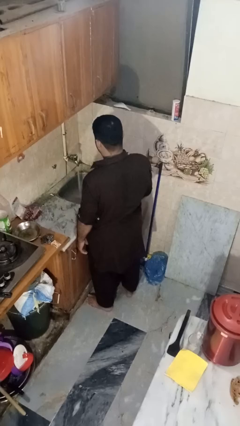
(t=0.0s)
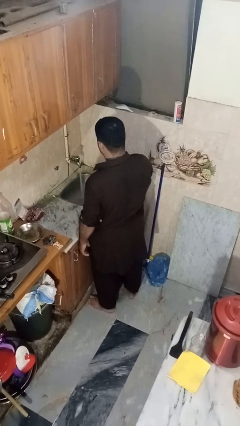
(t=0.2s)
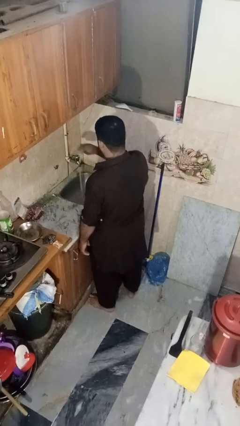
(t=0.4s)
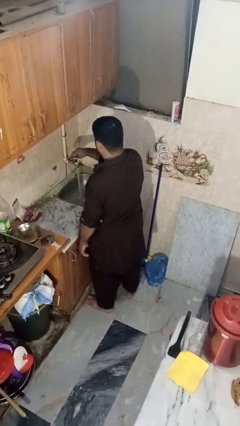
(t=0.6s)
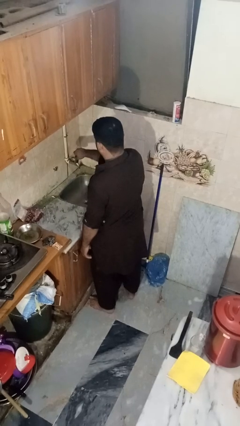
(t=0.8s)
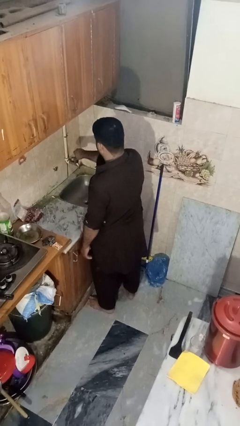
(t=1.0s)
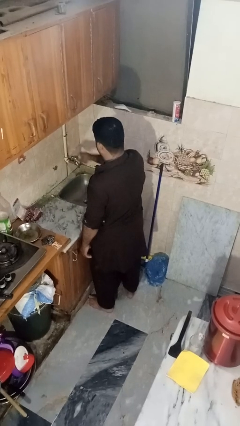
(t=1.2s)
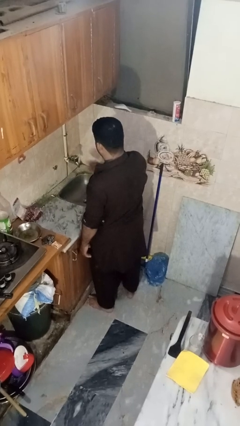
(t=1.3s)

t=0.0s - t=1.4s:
person turns off faucet

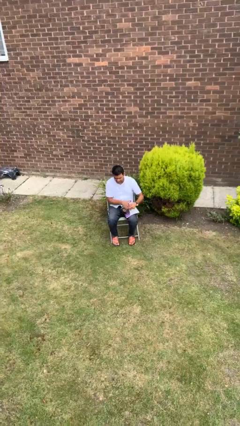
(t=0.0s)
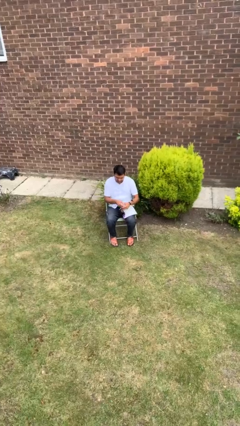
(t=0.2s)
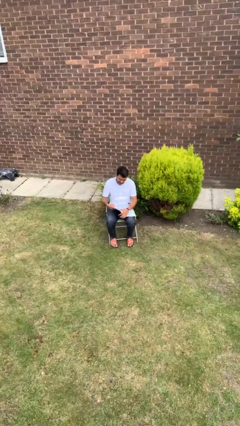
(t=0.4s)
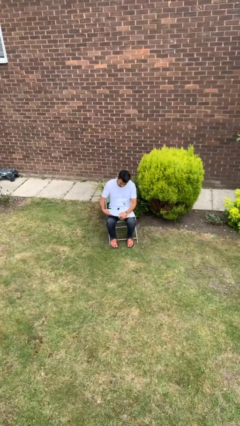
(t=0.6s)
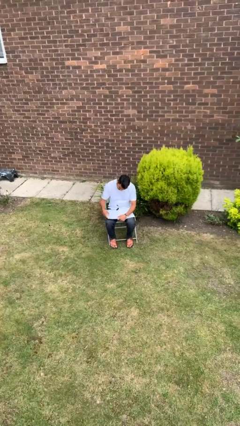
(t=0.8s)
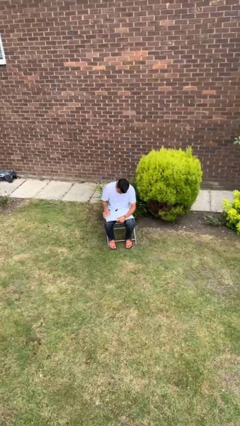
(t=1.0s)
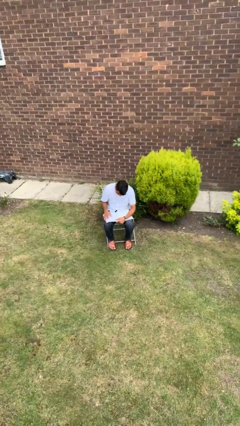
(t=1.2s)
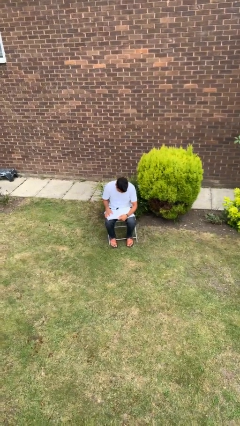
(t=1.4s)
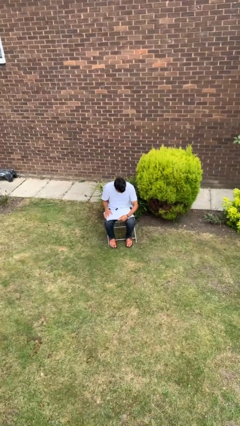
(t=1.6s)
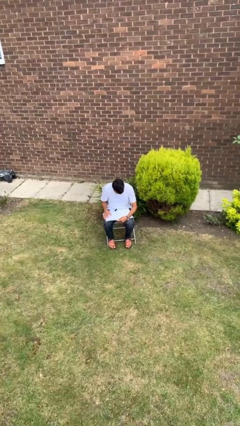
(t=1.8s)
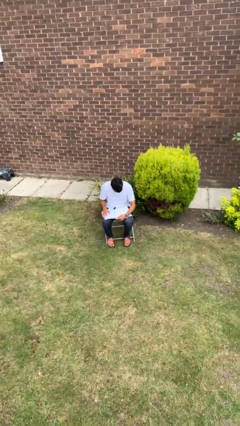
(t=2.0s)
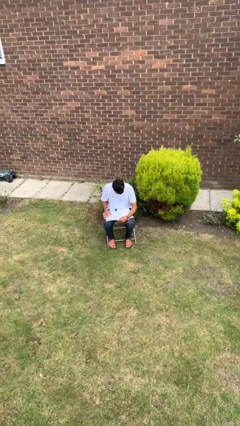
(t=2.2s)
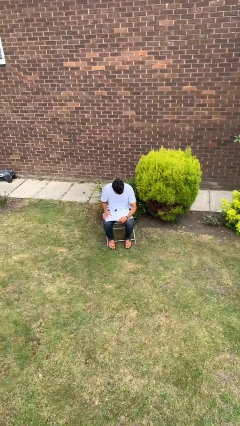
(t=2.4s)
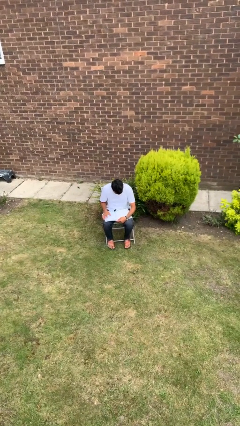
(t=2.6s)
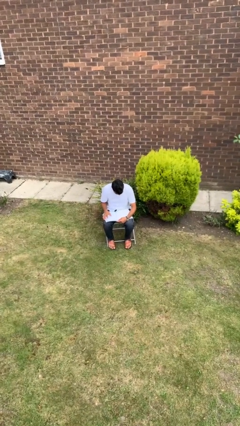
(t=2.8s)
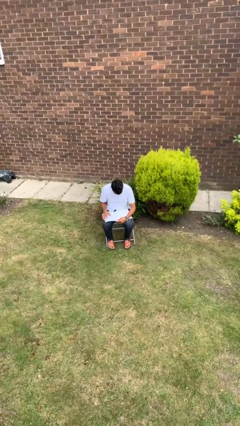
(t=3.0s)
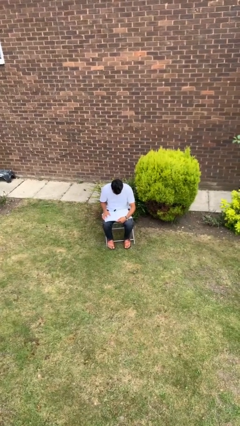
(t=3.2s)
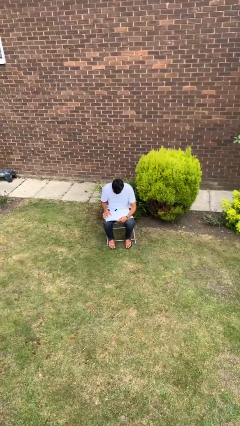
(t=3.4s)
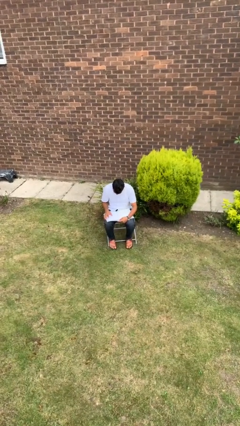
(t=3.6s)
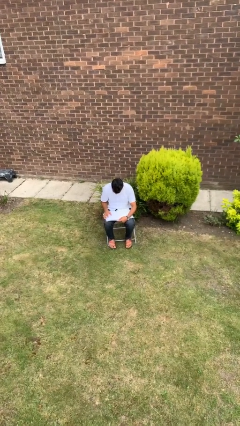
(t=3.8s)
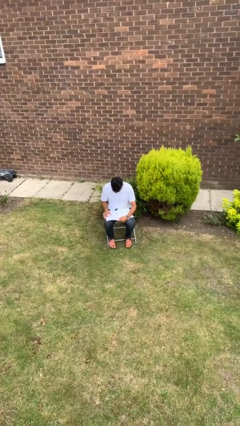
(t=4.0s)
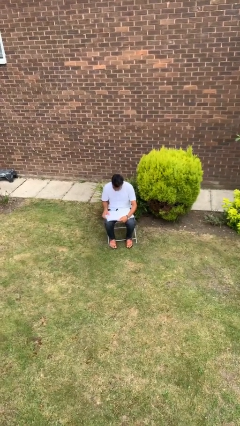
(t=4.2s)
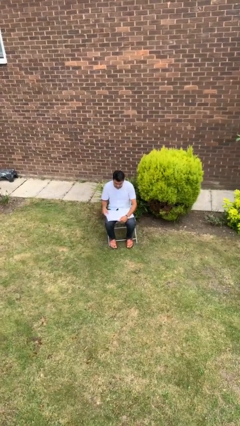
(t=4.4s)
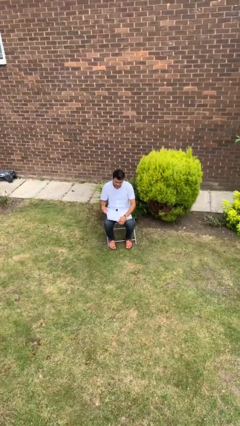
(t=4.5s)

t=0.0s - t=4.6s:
person reads book

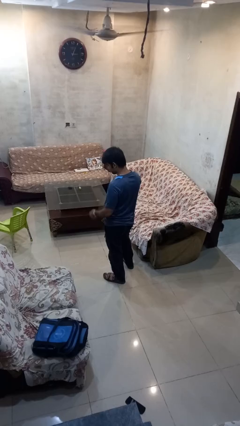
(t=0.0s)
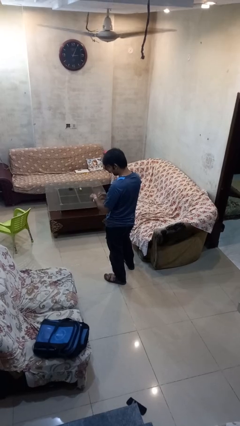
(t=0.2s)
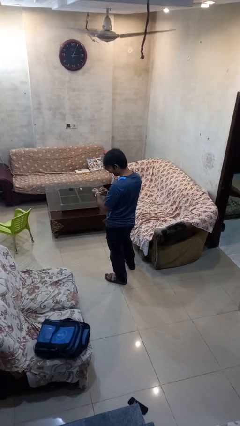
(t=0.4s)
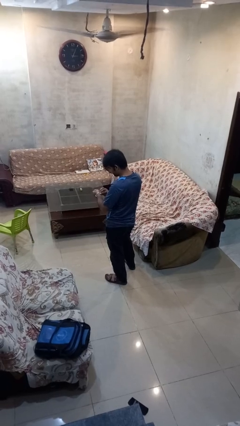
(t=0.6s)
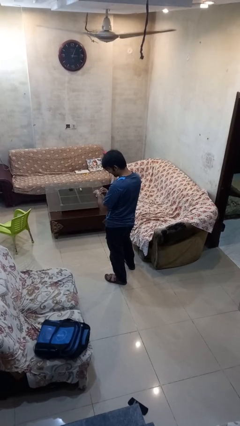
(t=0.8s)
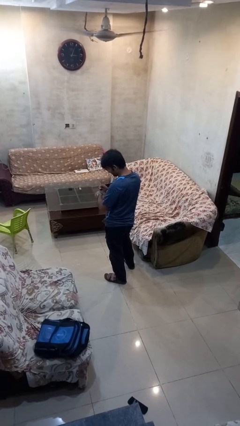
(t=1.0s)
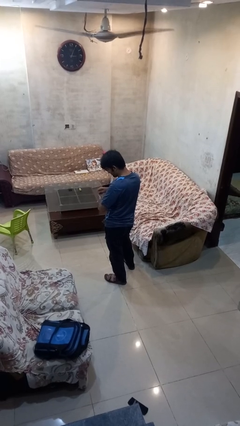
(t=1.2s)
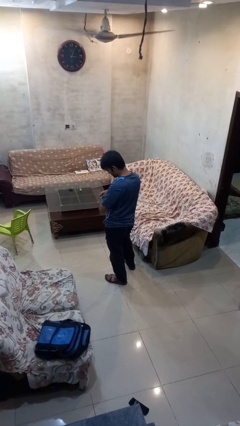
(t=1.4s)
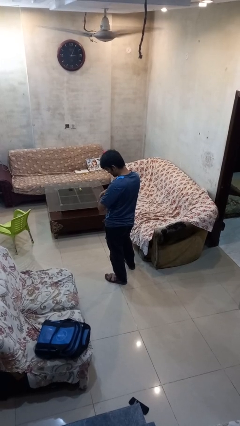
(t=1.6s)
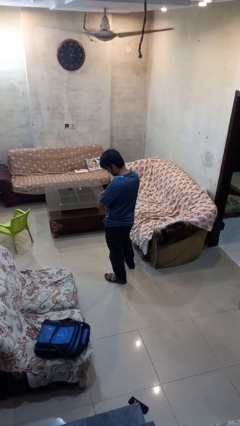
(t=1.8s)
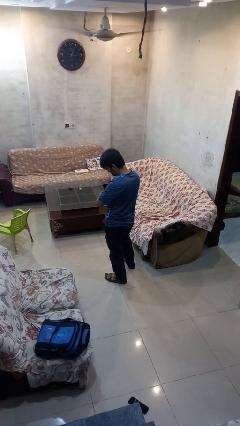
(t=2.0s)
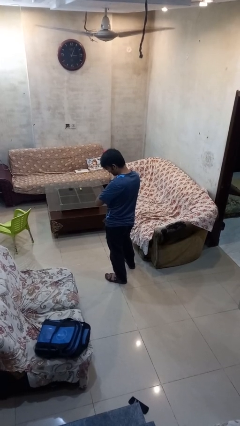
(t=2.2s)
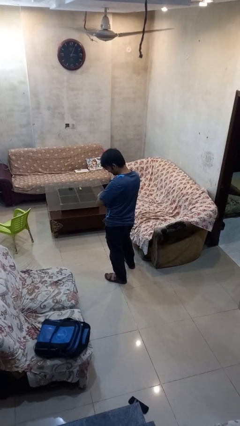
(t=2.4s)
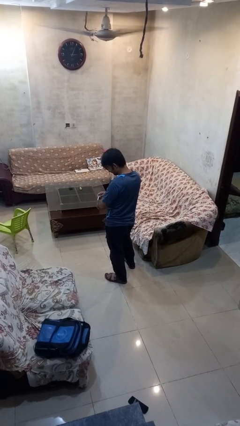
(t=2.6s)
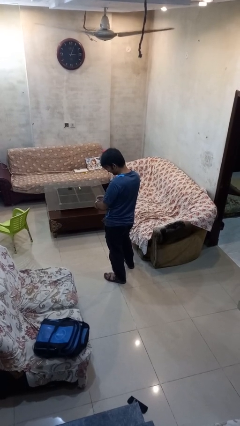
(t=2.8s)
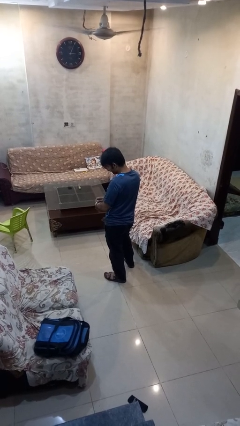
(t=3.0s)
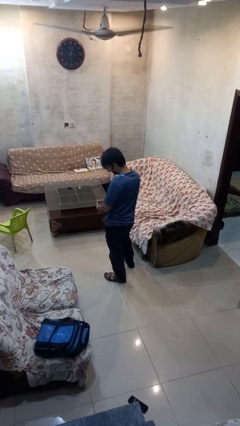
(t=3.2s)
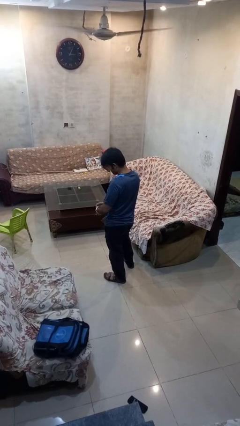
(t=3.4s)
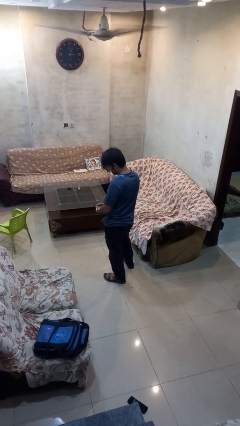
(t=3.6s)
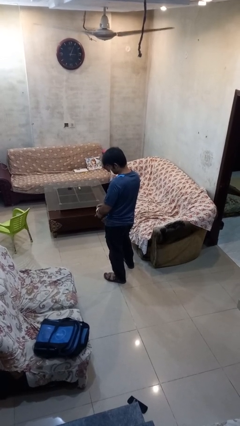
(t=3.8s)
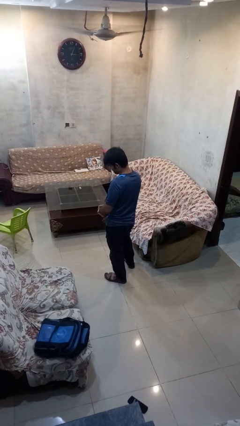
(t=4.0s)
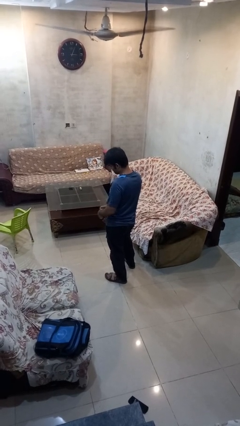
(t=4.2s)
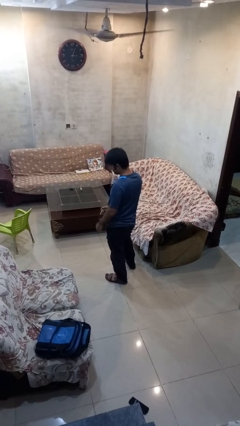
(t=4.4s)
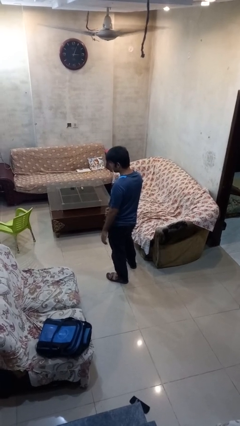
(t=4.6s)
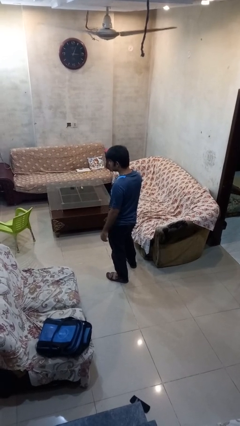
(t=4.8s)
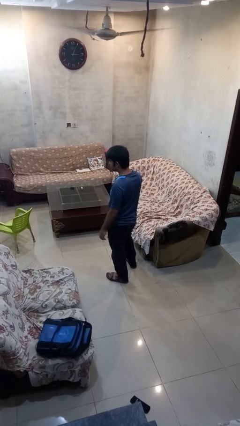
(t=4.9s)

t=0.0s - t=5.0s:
person takes off wristwatch

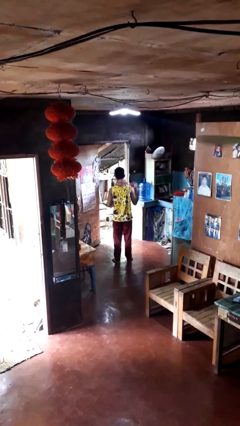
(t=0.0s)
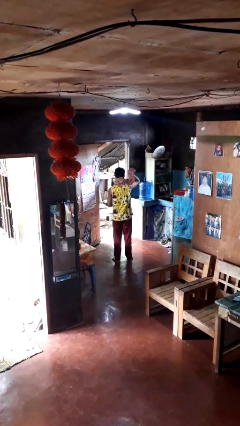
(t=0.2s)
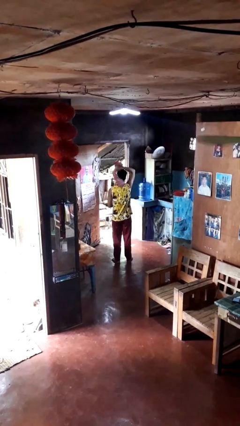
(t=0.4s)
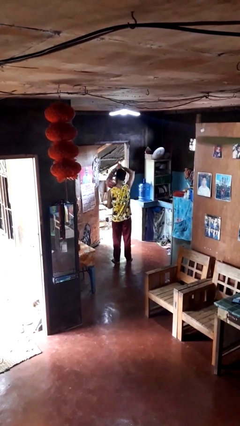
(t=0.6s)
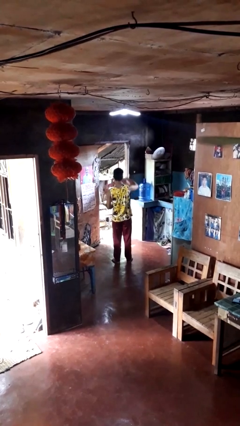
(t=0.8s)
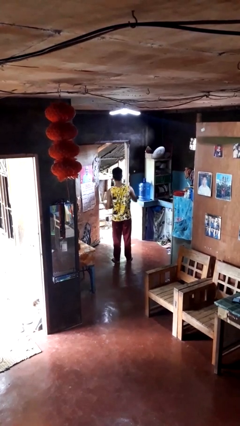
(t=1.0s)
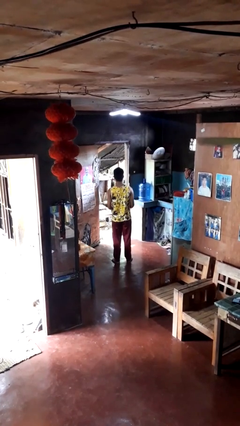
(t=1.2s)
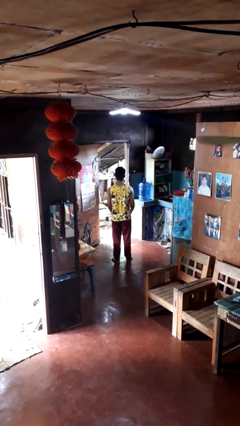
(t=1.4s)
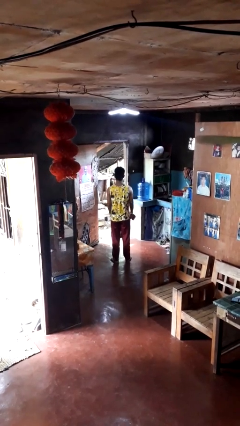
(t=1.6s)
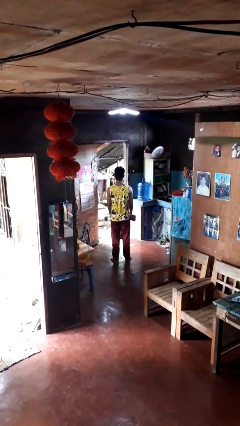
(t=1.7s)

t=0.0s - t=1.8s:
person takes off scarf

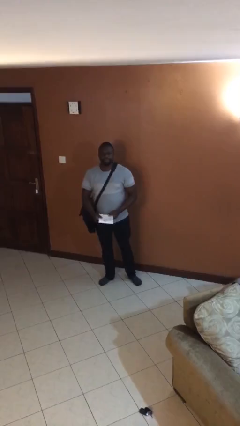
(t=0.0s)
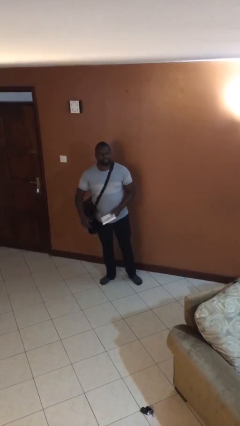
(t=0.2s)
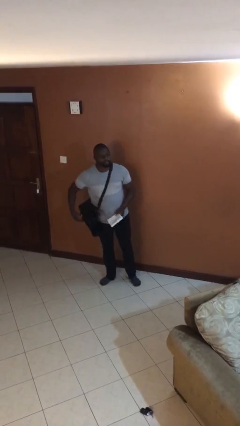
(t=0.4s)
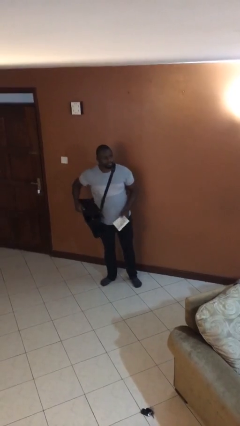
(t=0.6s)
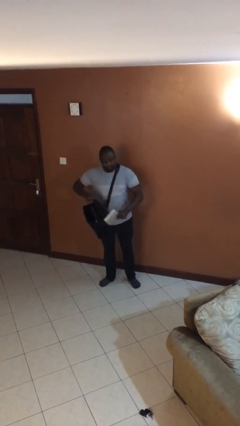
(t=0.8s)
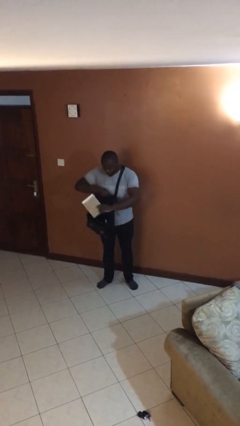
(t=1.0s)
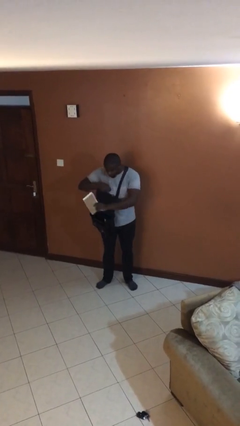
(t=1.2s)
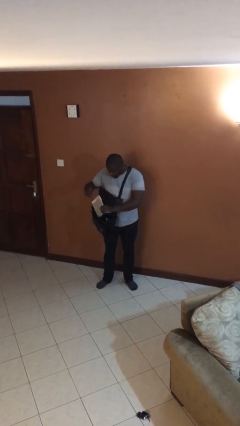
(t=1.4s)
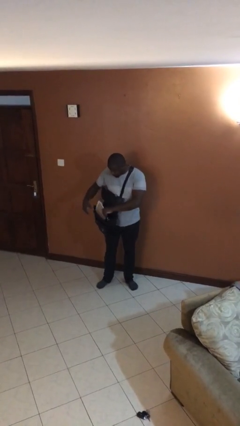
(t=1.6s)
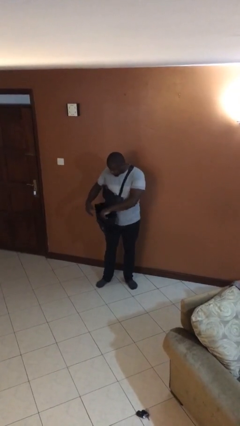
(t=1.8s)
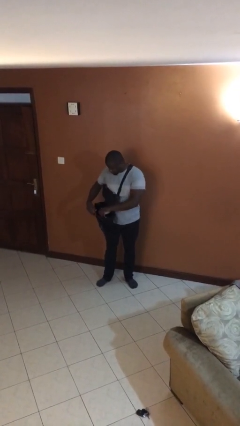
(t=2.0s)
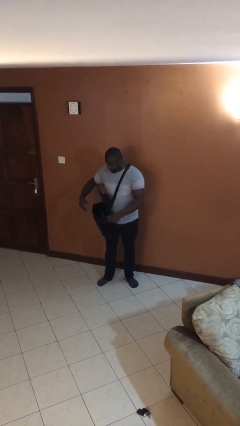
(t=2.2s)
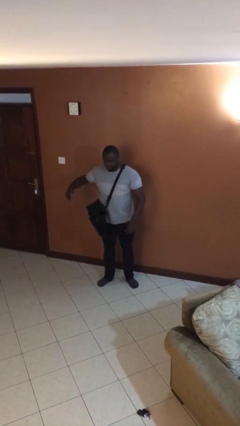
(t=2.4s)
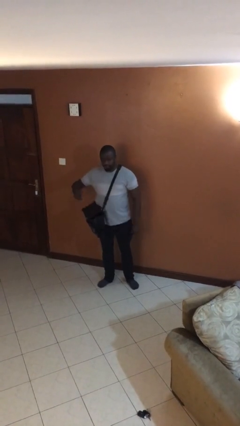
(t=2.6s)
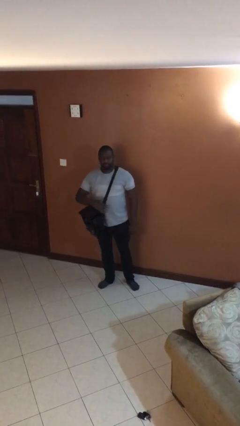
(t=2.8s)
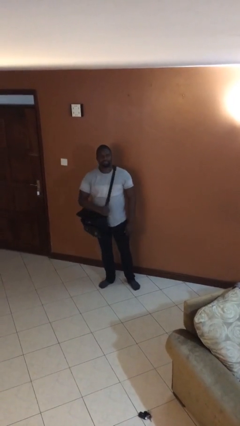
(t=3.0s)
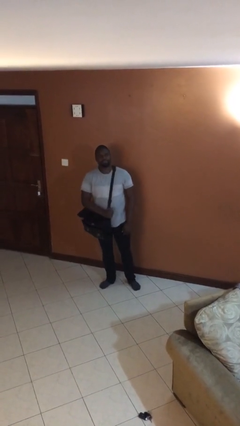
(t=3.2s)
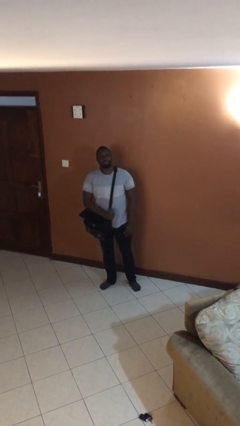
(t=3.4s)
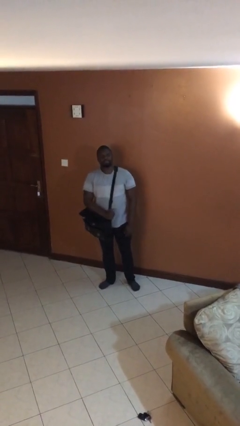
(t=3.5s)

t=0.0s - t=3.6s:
person puts object into purse

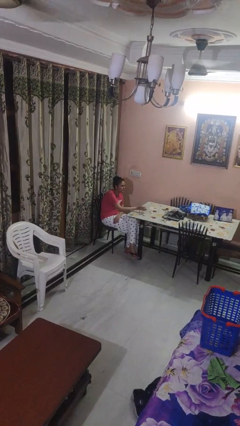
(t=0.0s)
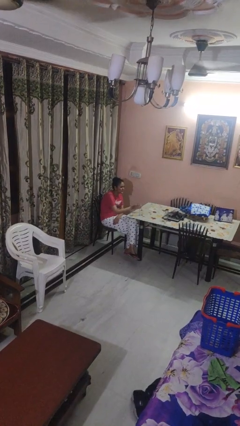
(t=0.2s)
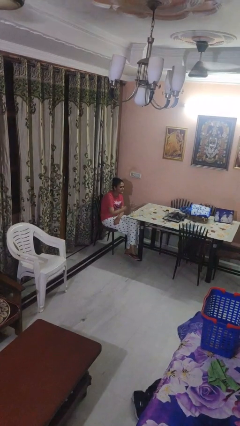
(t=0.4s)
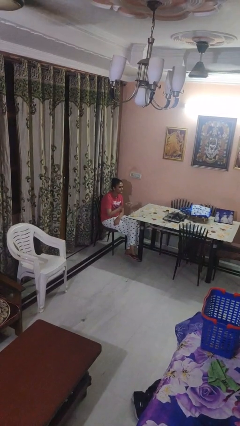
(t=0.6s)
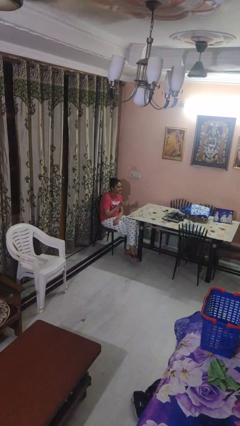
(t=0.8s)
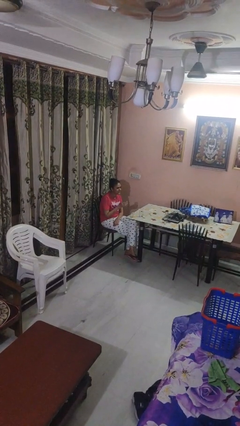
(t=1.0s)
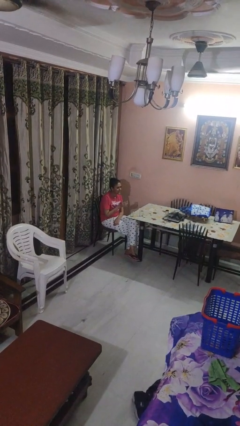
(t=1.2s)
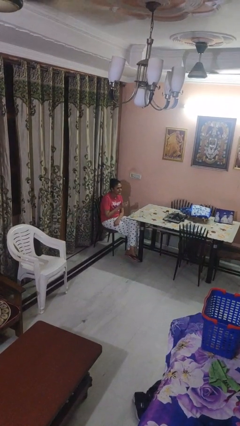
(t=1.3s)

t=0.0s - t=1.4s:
person picks up object from table
